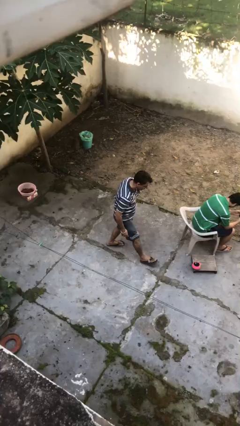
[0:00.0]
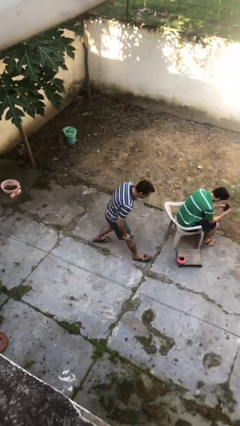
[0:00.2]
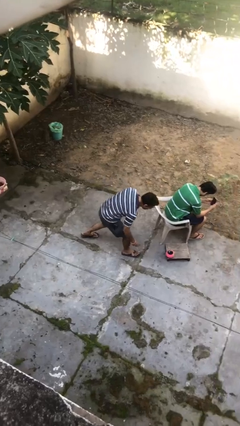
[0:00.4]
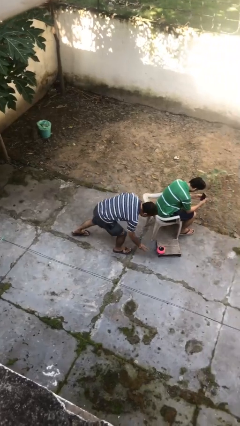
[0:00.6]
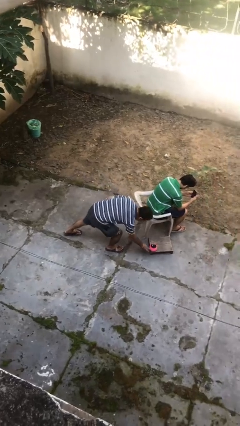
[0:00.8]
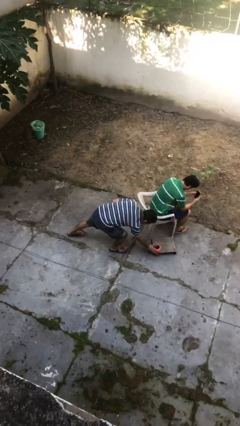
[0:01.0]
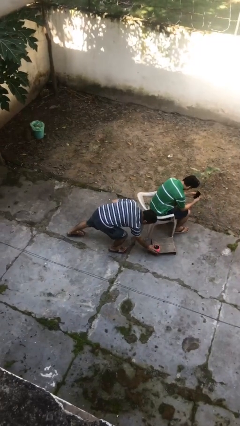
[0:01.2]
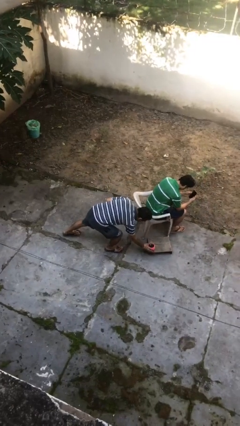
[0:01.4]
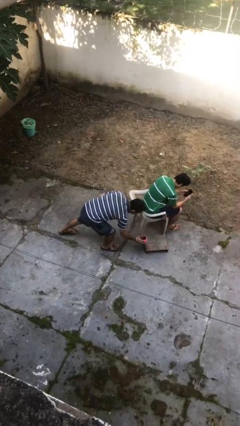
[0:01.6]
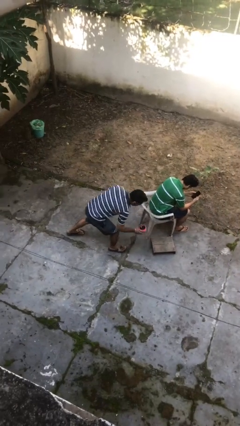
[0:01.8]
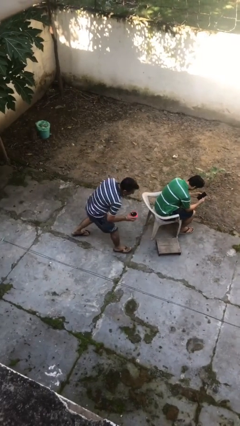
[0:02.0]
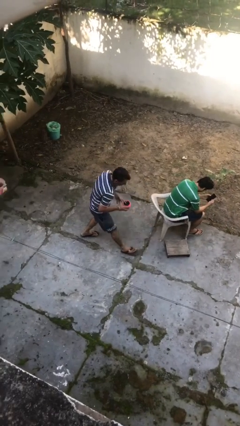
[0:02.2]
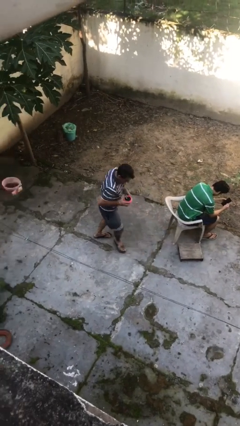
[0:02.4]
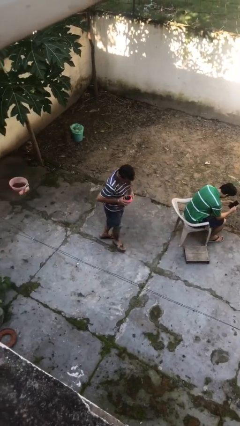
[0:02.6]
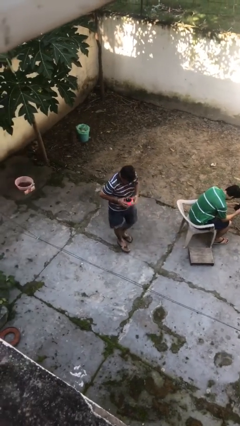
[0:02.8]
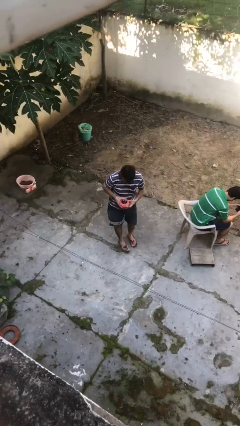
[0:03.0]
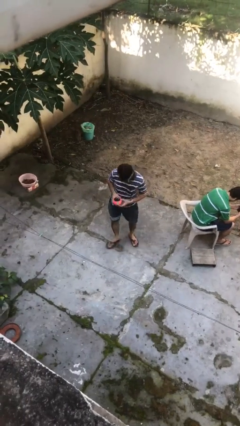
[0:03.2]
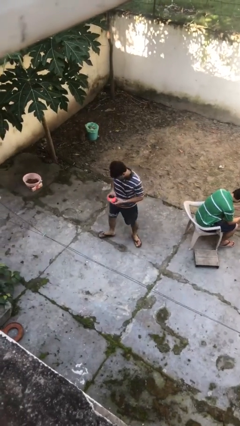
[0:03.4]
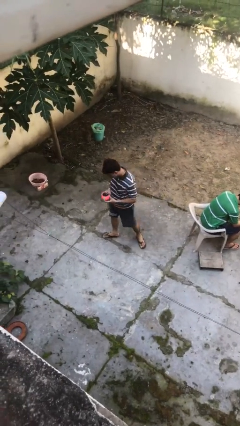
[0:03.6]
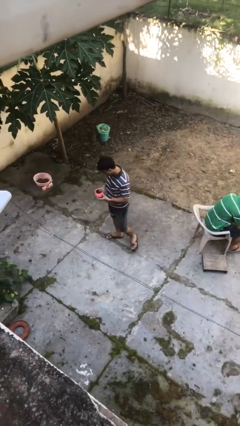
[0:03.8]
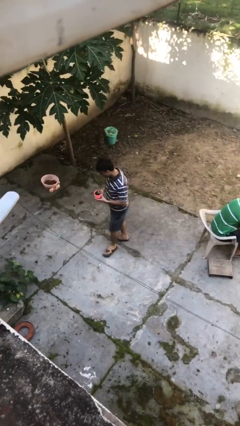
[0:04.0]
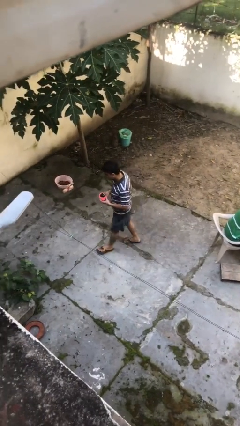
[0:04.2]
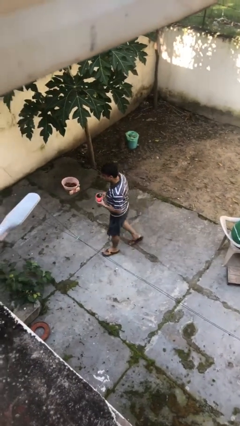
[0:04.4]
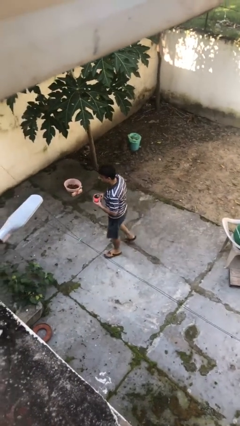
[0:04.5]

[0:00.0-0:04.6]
person steals object from person

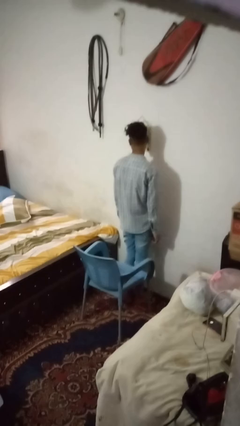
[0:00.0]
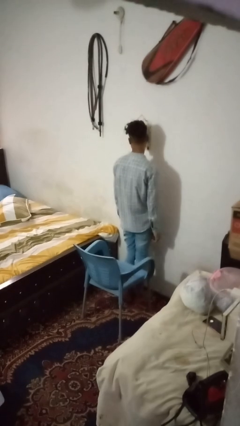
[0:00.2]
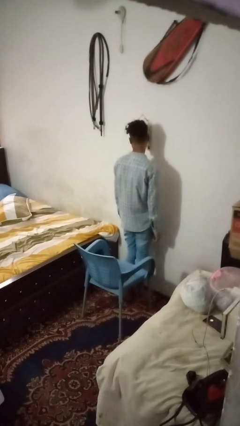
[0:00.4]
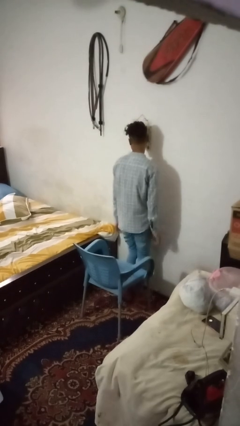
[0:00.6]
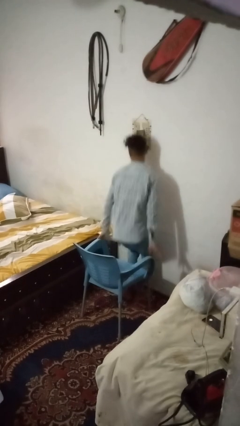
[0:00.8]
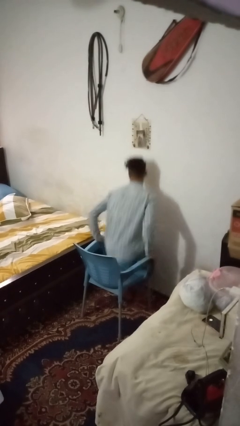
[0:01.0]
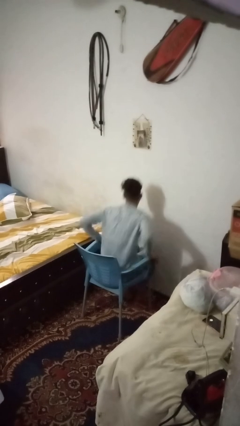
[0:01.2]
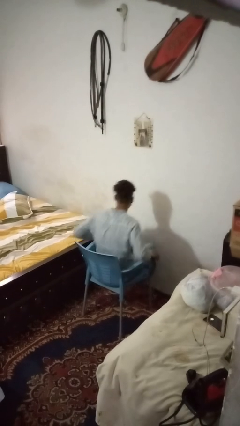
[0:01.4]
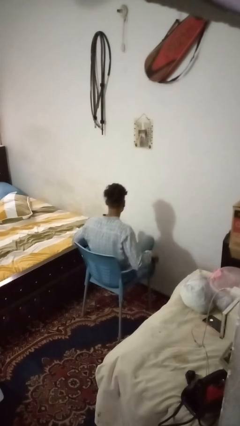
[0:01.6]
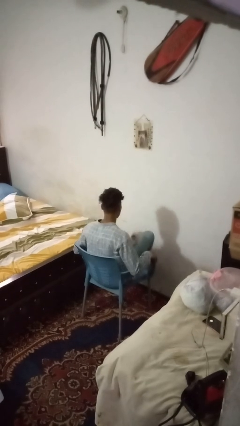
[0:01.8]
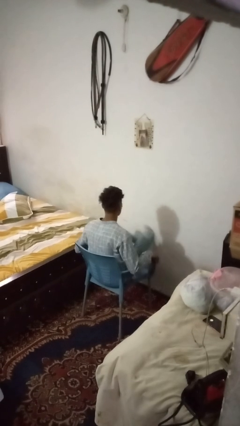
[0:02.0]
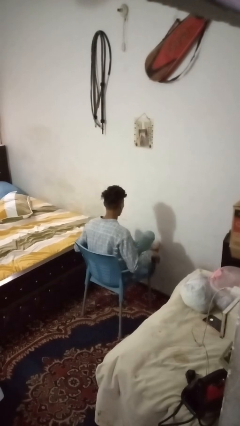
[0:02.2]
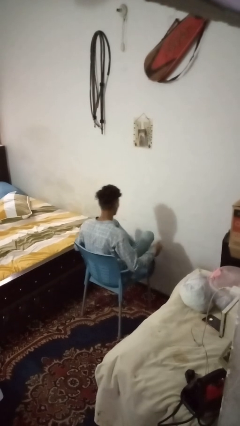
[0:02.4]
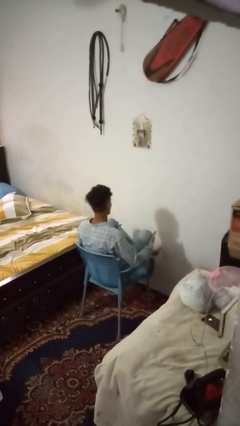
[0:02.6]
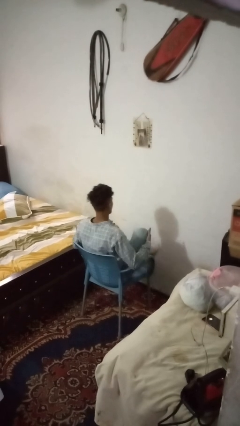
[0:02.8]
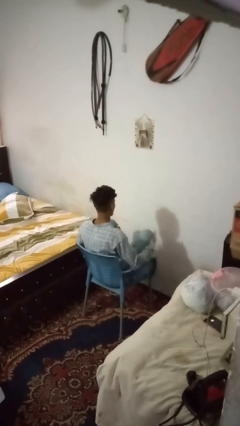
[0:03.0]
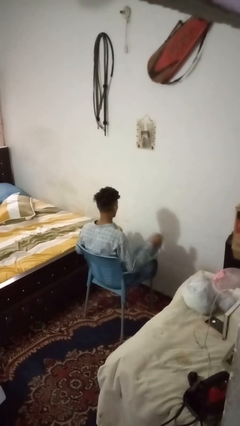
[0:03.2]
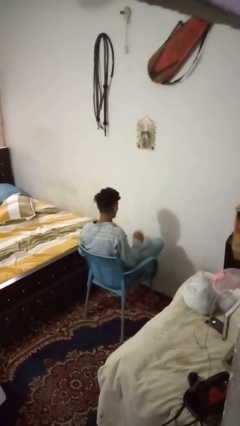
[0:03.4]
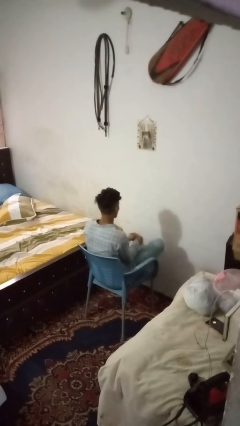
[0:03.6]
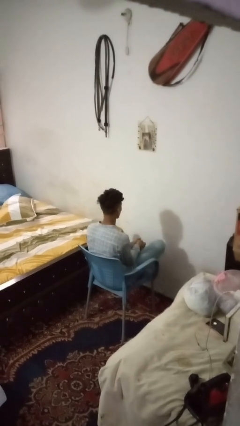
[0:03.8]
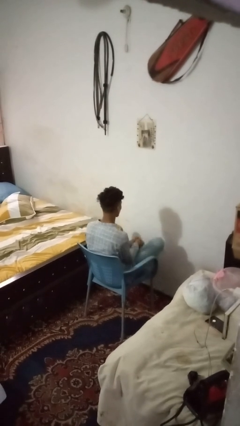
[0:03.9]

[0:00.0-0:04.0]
person crosses legs

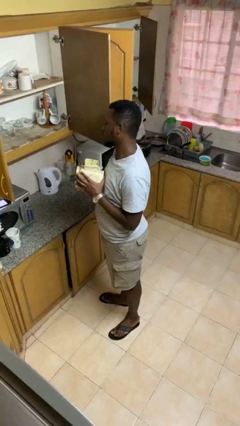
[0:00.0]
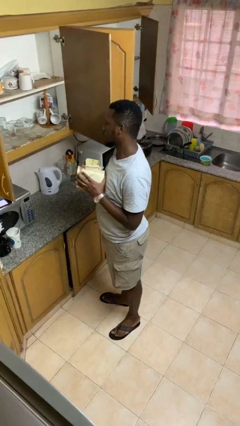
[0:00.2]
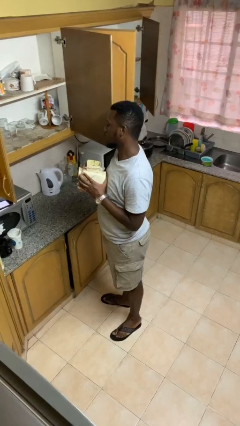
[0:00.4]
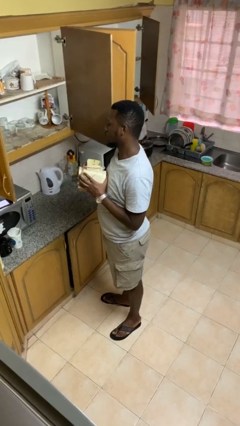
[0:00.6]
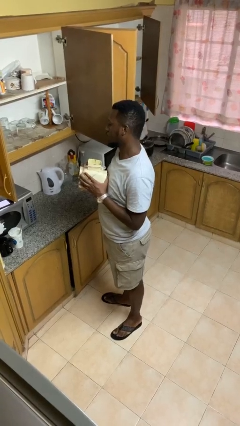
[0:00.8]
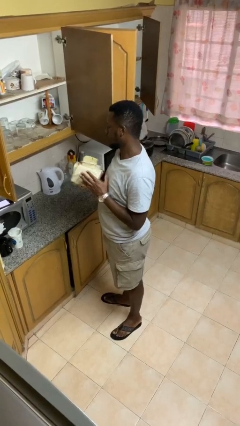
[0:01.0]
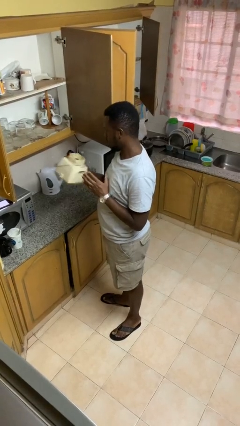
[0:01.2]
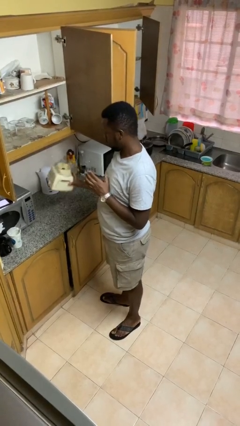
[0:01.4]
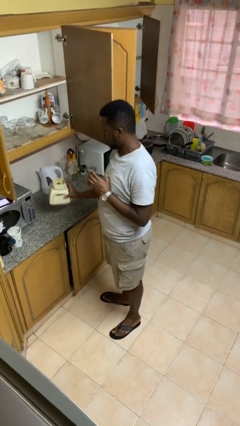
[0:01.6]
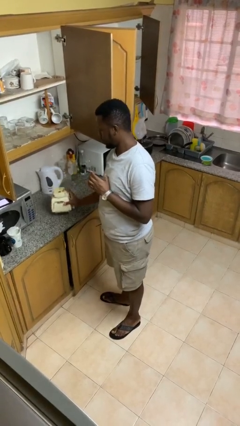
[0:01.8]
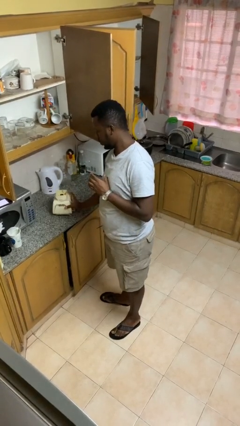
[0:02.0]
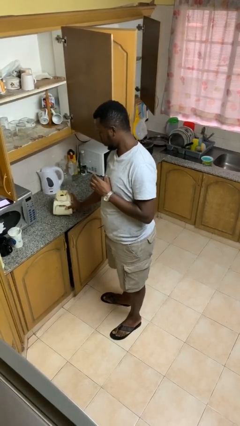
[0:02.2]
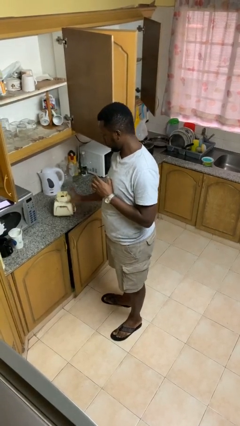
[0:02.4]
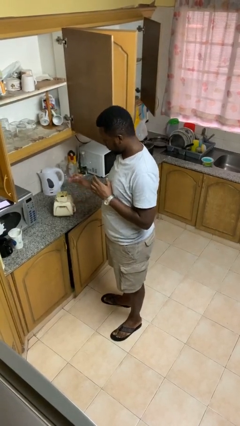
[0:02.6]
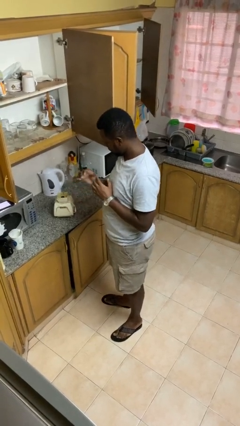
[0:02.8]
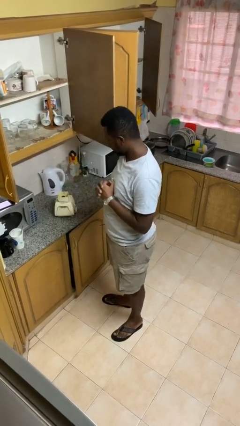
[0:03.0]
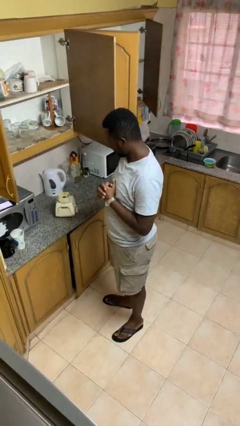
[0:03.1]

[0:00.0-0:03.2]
person puts down object on table

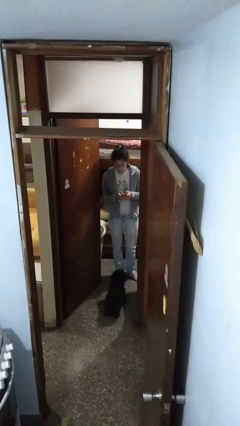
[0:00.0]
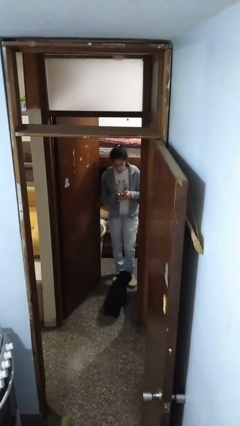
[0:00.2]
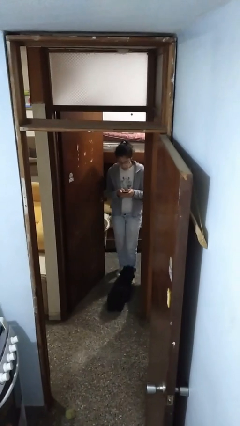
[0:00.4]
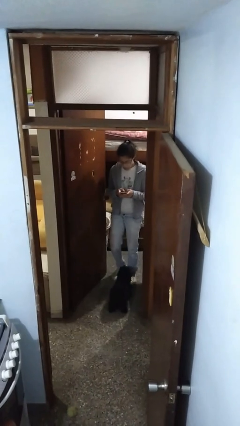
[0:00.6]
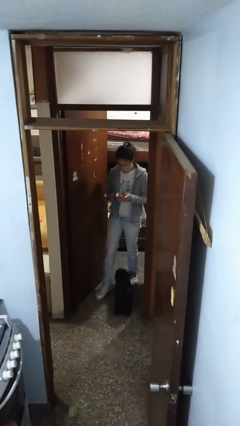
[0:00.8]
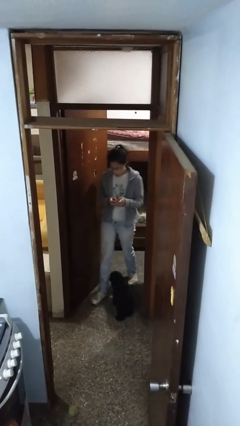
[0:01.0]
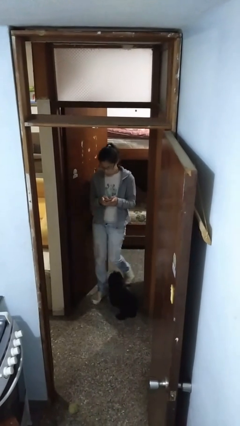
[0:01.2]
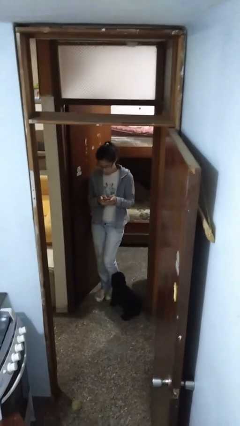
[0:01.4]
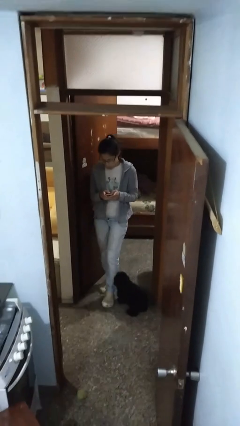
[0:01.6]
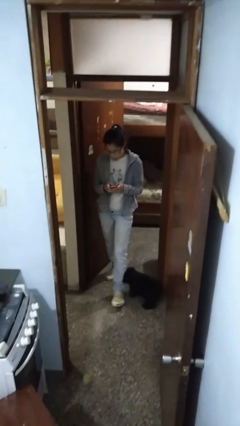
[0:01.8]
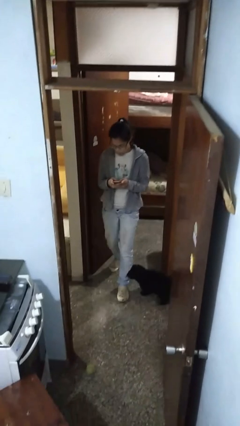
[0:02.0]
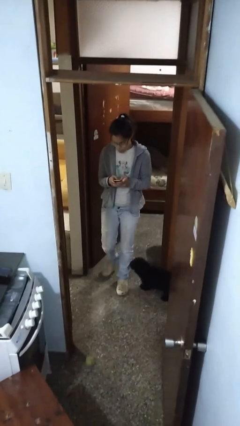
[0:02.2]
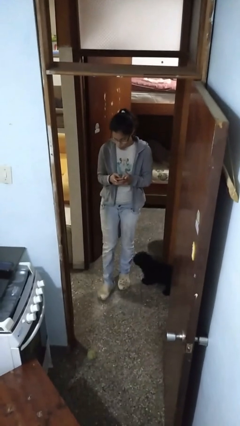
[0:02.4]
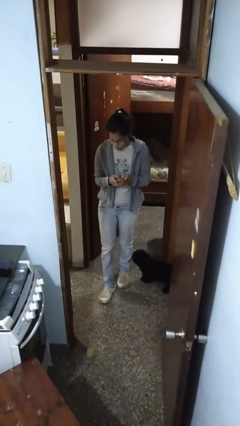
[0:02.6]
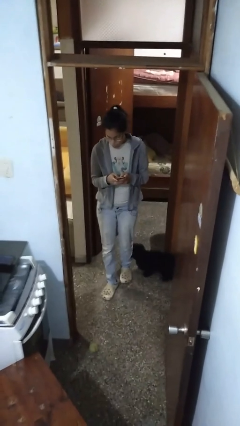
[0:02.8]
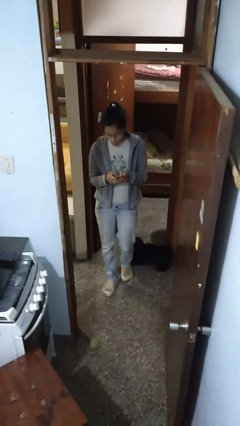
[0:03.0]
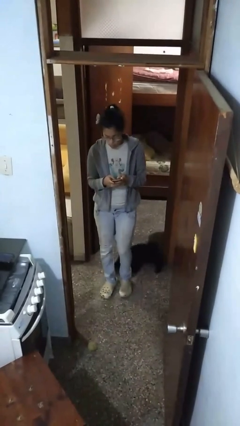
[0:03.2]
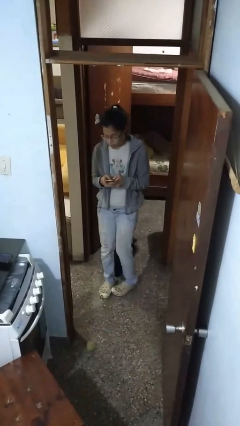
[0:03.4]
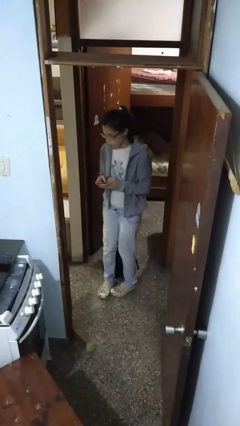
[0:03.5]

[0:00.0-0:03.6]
person enters scene through structure

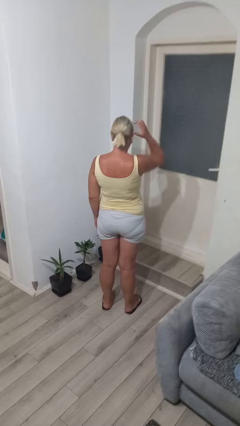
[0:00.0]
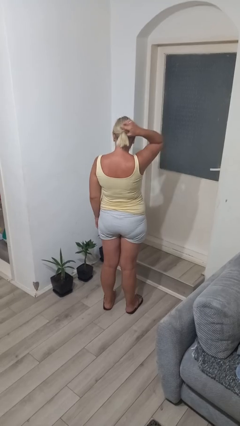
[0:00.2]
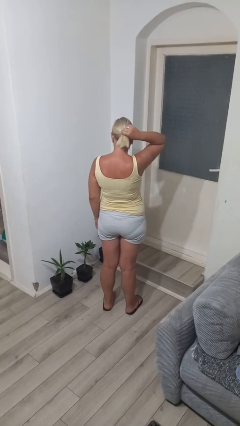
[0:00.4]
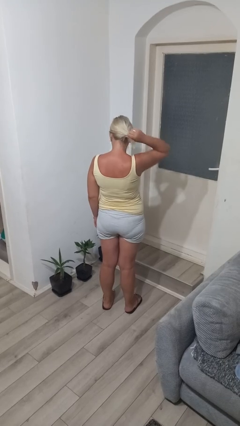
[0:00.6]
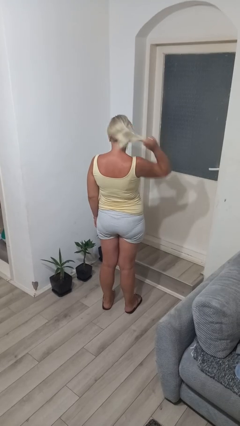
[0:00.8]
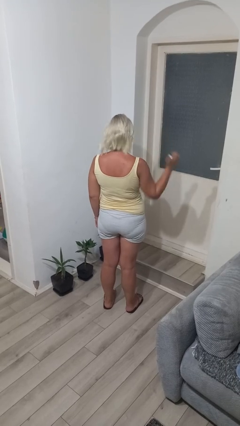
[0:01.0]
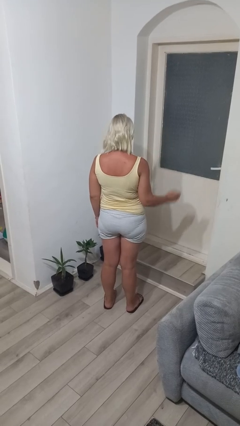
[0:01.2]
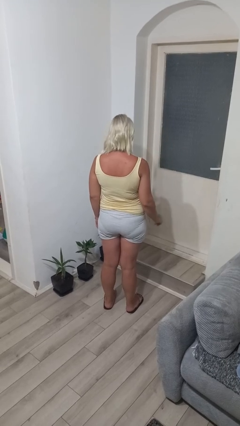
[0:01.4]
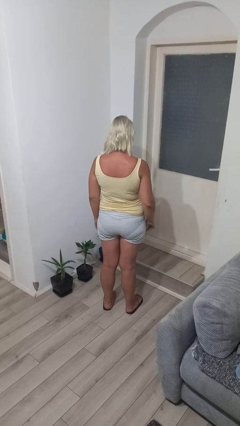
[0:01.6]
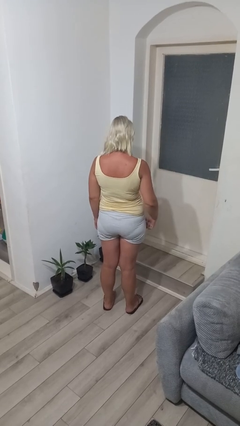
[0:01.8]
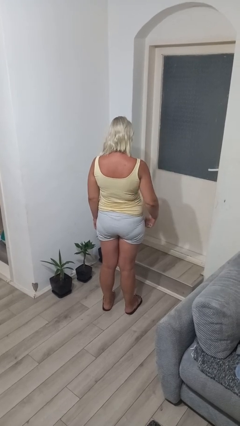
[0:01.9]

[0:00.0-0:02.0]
person takes off hairtie
